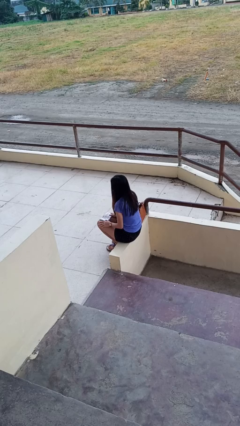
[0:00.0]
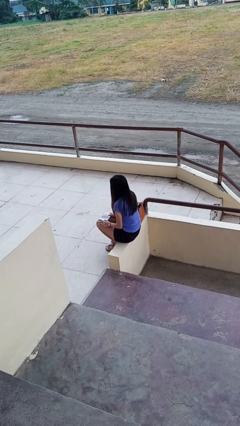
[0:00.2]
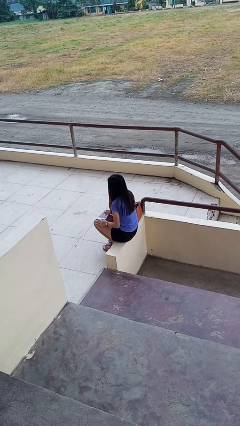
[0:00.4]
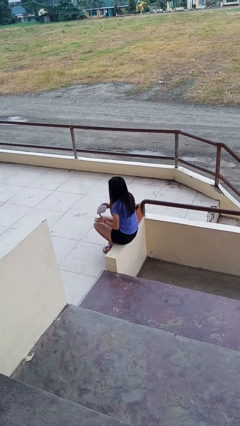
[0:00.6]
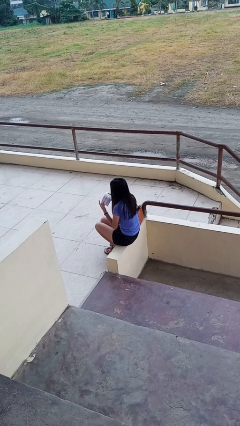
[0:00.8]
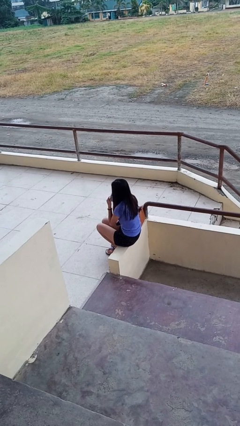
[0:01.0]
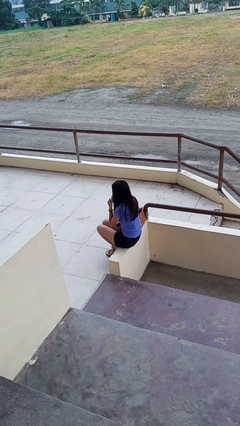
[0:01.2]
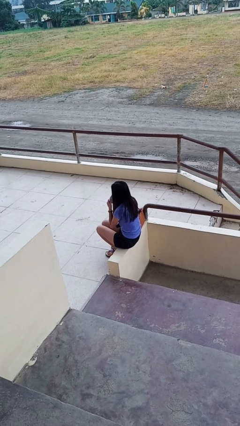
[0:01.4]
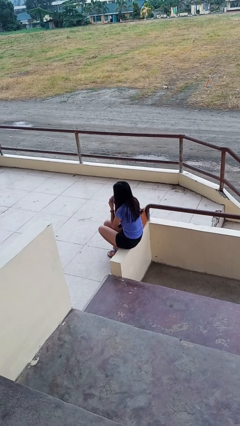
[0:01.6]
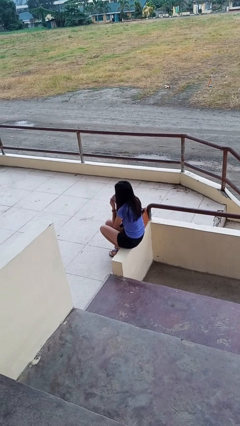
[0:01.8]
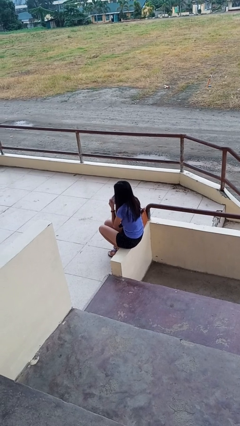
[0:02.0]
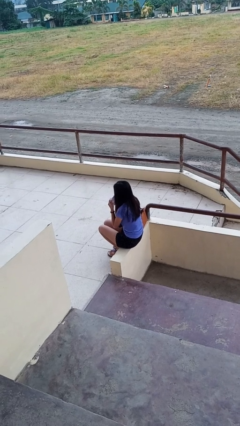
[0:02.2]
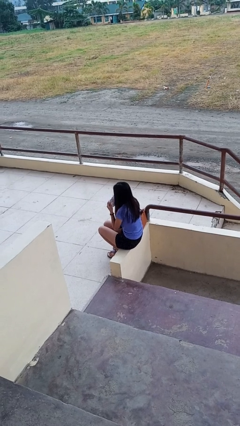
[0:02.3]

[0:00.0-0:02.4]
person wipes mouth with napkin

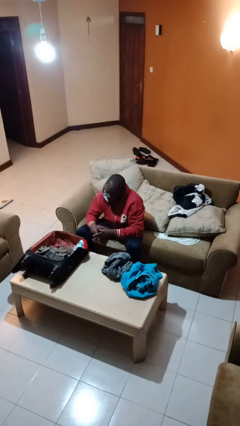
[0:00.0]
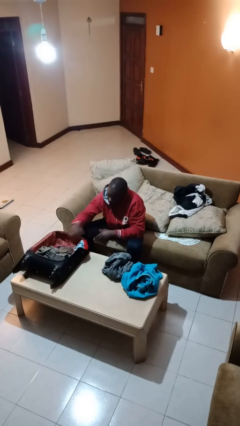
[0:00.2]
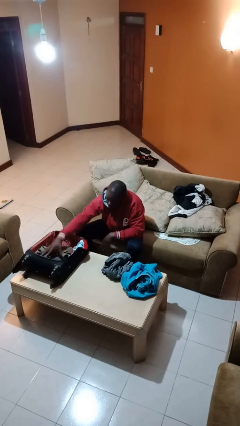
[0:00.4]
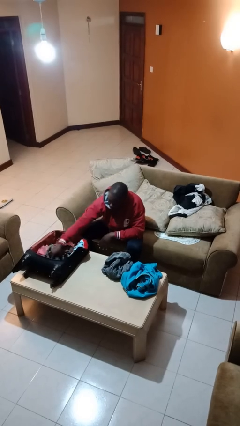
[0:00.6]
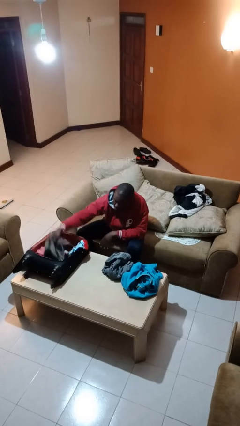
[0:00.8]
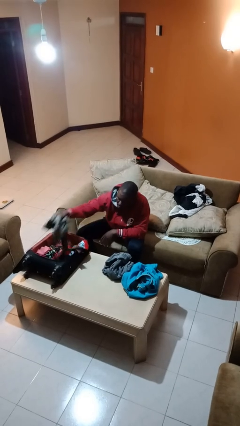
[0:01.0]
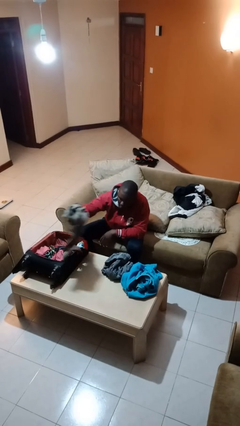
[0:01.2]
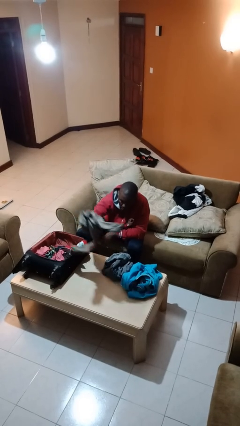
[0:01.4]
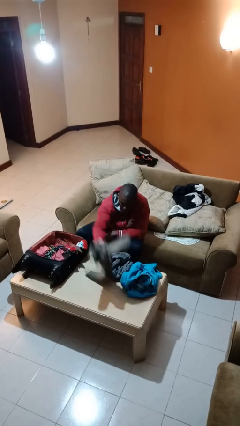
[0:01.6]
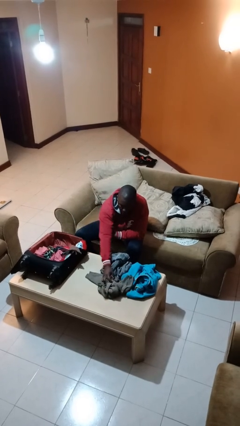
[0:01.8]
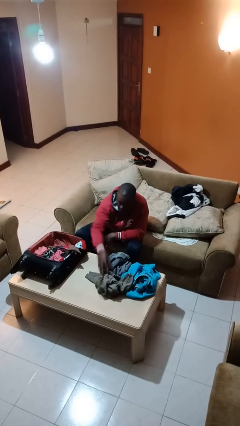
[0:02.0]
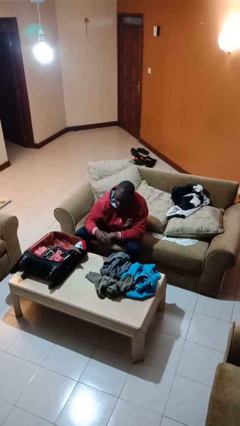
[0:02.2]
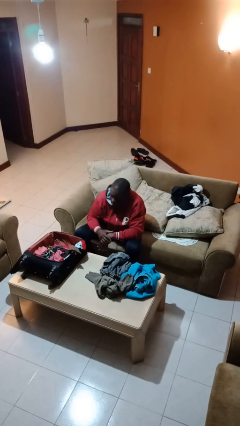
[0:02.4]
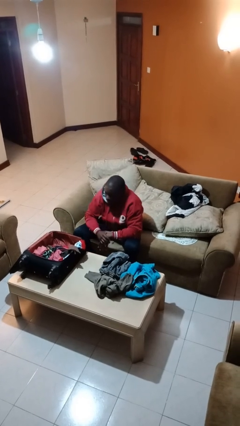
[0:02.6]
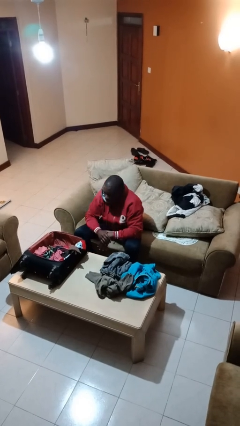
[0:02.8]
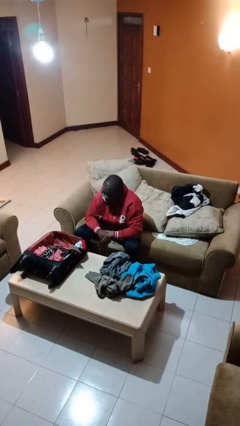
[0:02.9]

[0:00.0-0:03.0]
person unloads clothes from suitcase

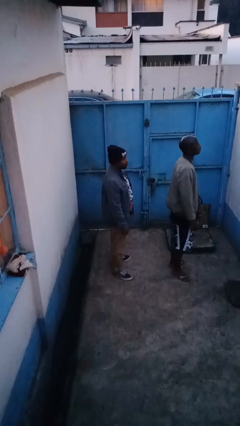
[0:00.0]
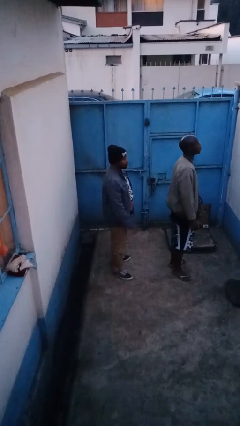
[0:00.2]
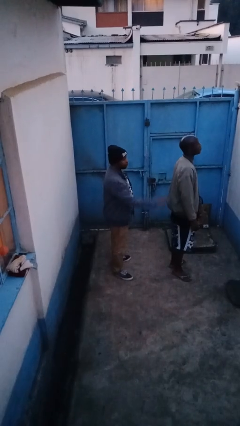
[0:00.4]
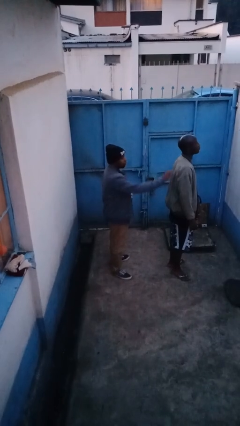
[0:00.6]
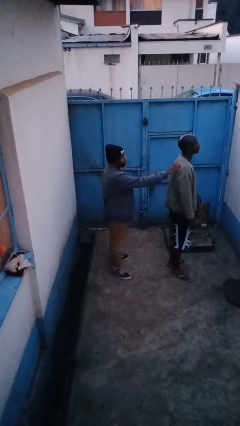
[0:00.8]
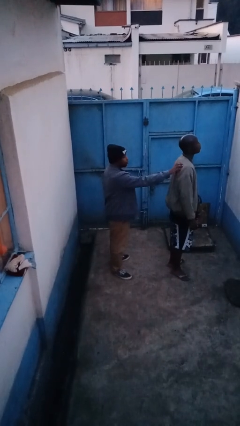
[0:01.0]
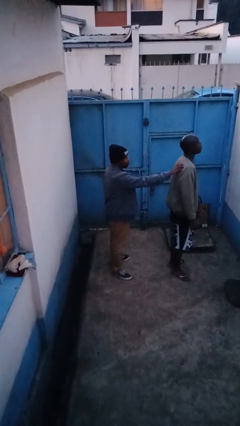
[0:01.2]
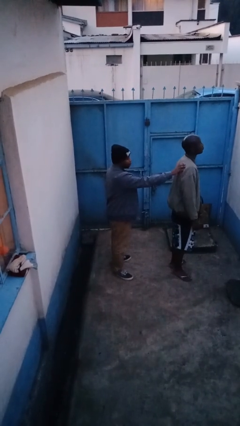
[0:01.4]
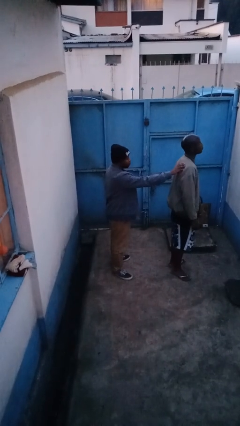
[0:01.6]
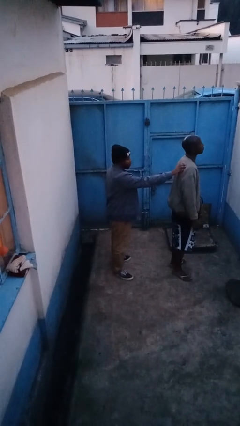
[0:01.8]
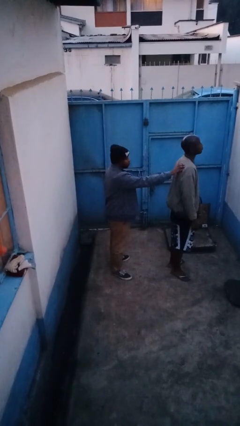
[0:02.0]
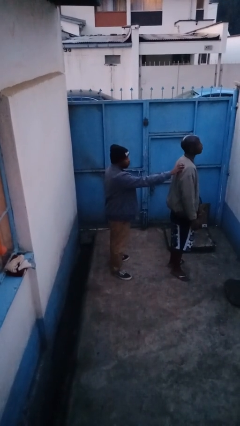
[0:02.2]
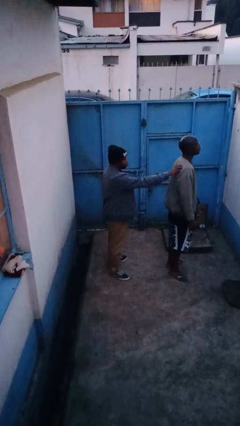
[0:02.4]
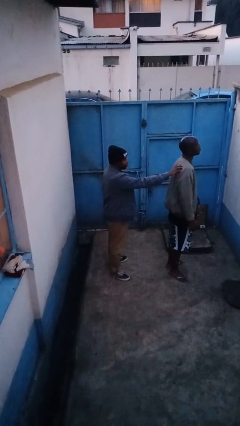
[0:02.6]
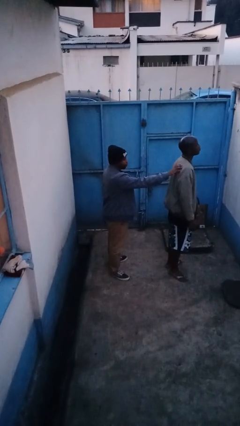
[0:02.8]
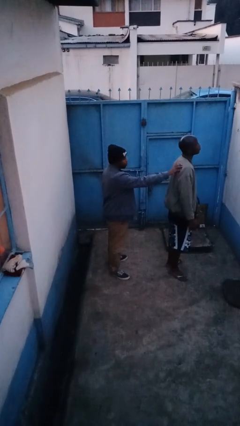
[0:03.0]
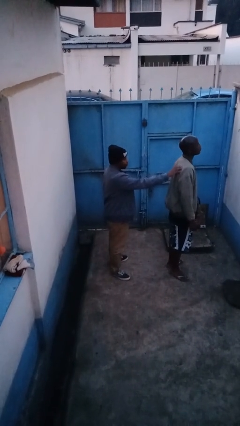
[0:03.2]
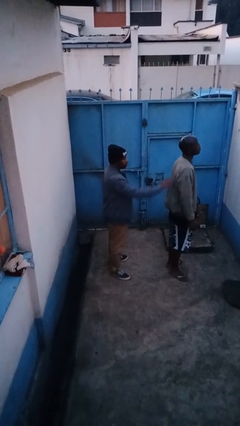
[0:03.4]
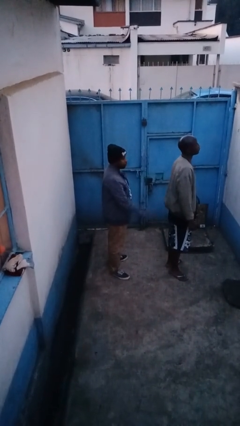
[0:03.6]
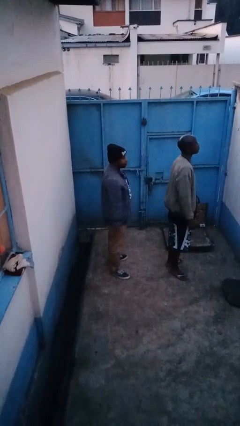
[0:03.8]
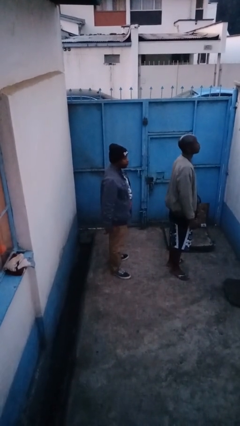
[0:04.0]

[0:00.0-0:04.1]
person touches back of person

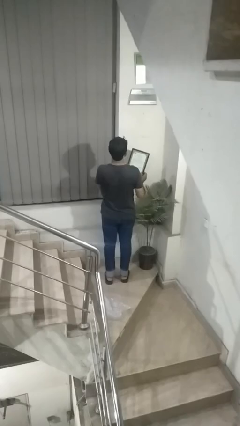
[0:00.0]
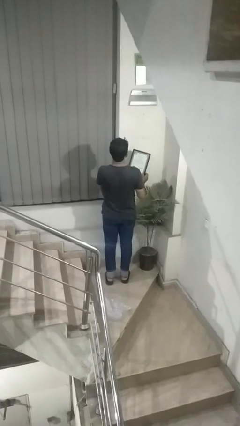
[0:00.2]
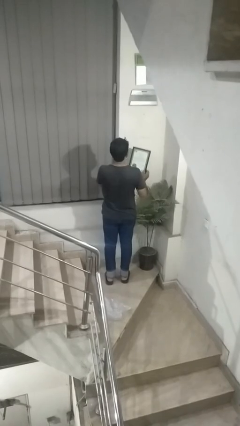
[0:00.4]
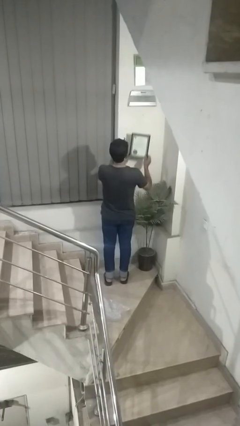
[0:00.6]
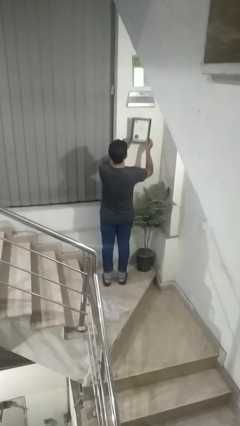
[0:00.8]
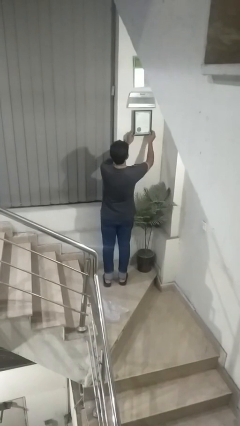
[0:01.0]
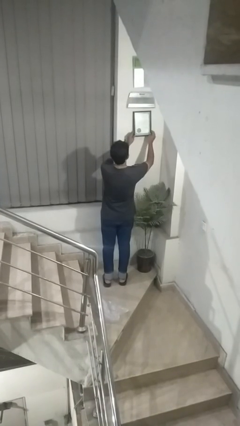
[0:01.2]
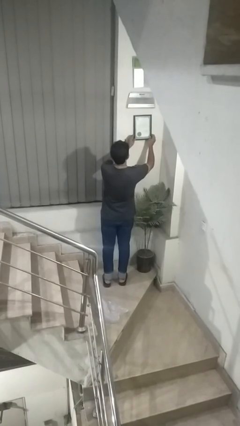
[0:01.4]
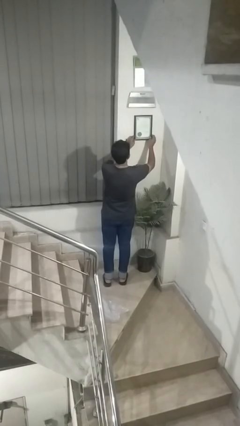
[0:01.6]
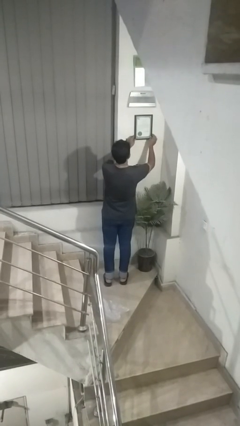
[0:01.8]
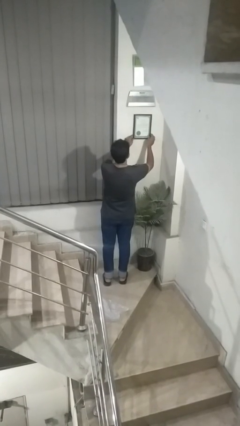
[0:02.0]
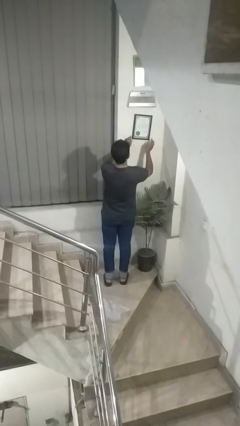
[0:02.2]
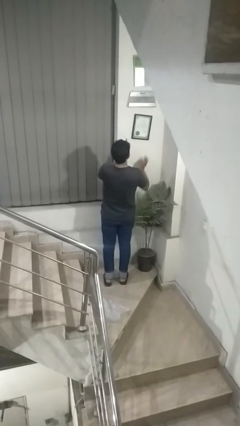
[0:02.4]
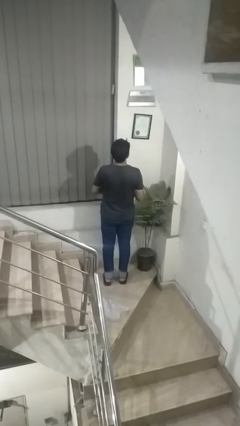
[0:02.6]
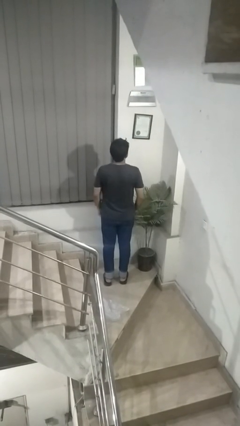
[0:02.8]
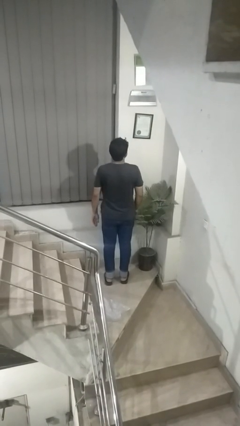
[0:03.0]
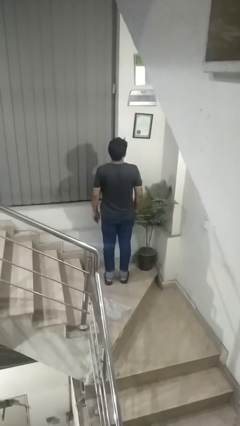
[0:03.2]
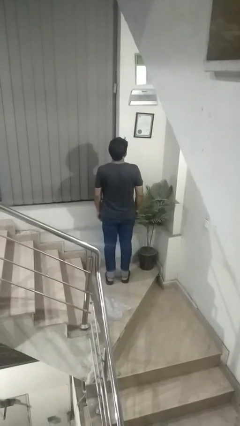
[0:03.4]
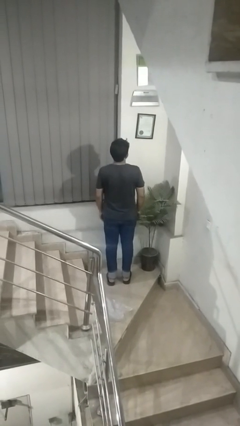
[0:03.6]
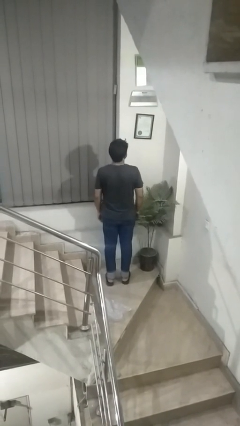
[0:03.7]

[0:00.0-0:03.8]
person puts up picture frame

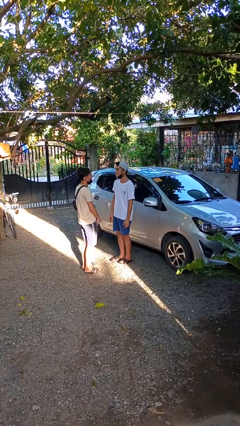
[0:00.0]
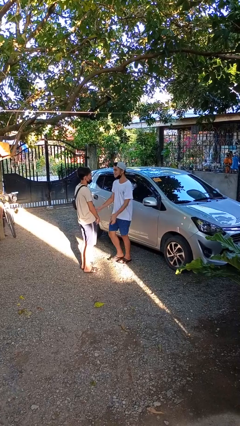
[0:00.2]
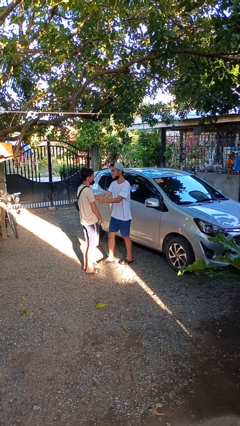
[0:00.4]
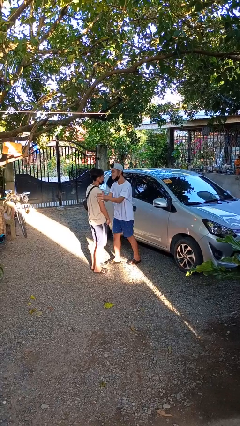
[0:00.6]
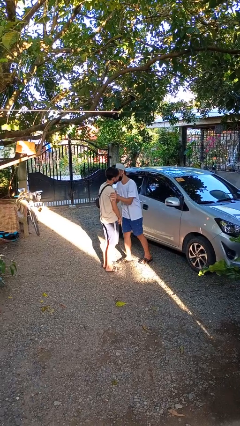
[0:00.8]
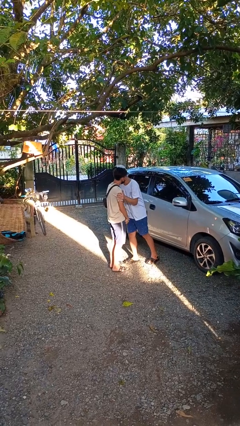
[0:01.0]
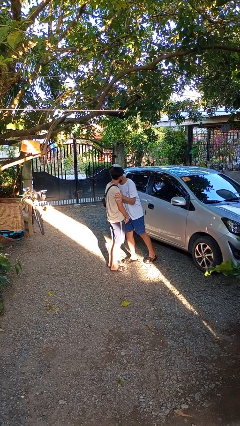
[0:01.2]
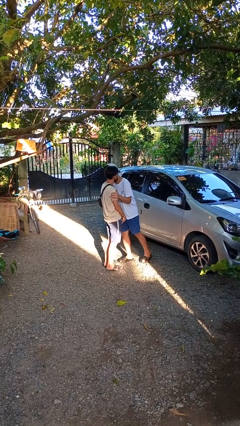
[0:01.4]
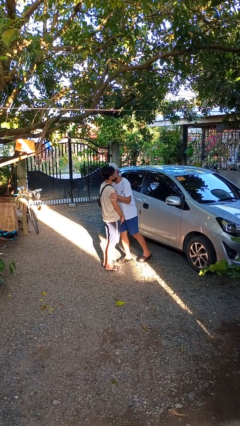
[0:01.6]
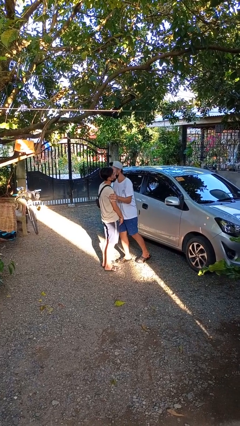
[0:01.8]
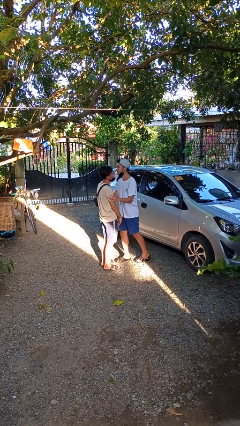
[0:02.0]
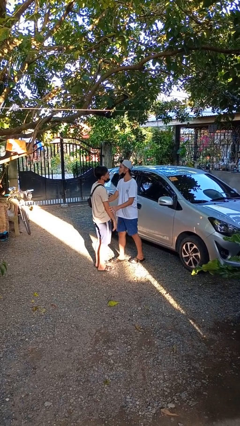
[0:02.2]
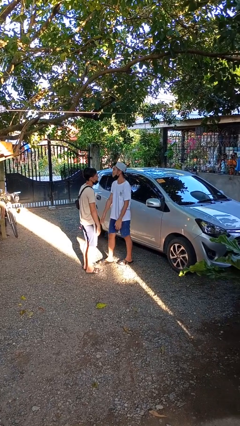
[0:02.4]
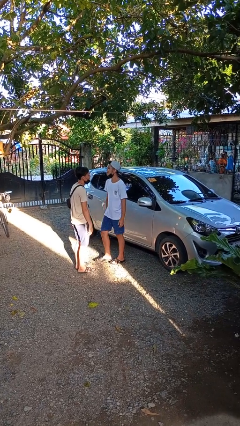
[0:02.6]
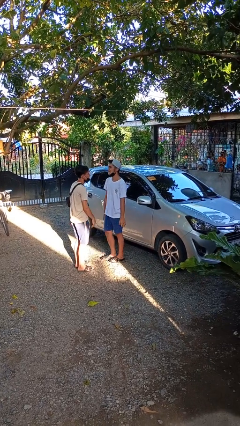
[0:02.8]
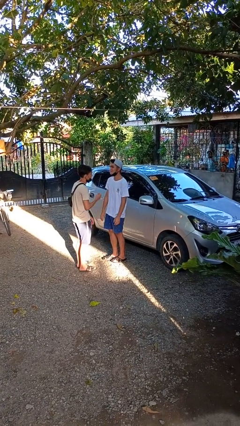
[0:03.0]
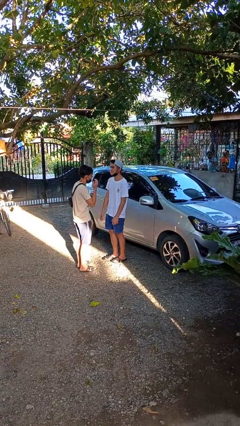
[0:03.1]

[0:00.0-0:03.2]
person kisses cheek of person

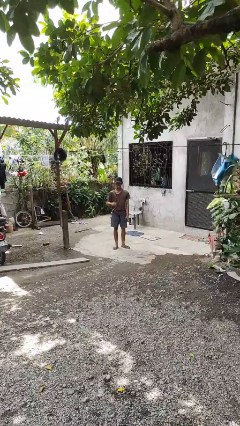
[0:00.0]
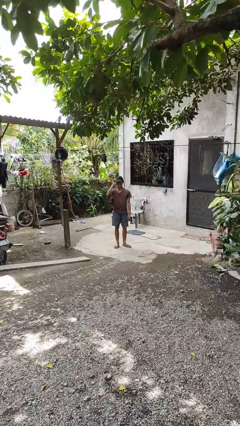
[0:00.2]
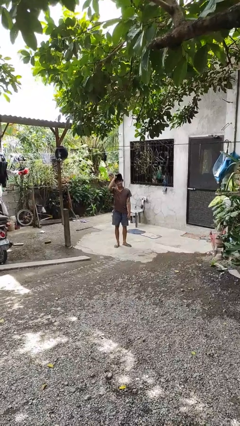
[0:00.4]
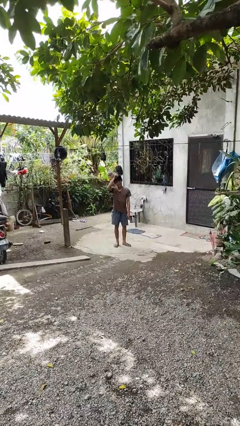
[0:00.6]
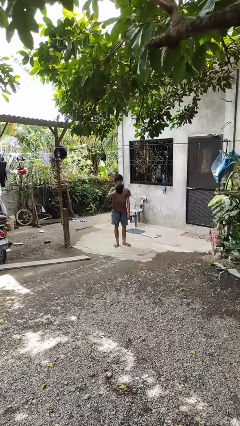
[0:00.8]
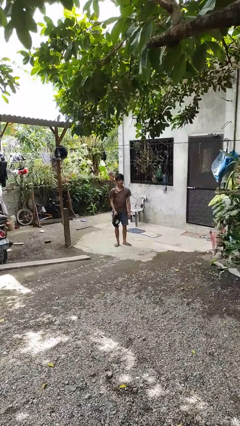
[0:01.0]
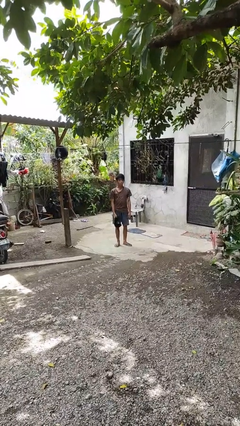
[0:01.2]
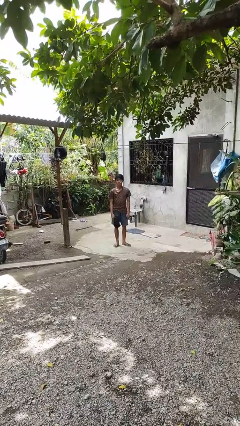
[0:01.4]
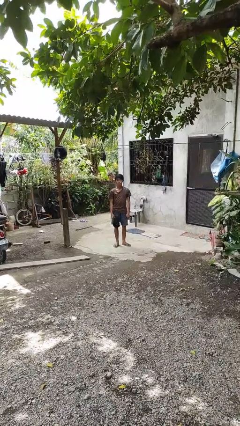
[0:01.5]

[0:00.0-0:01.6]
person takes off hat
